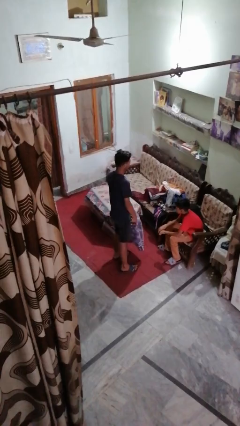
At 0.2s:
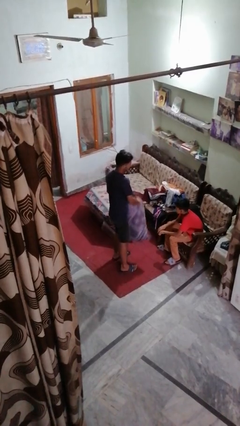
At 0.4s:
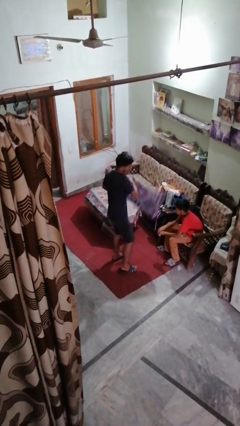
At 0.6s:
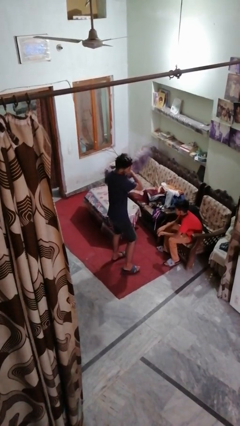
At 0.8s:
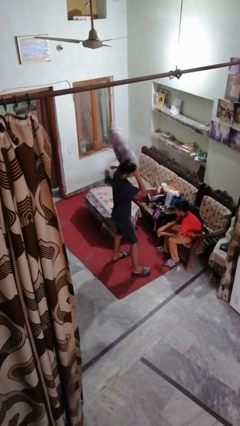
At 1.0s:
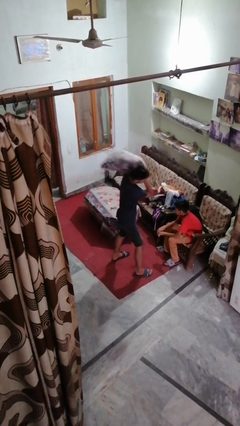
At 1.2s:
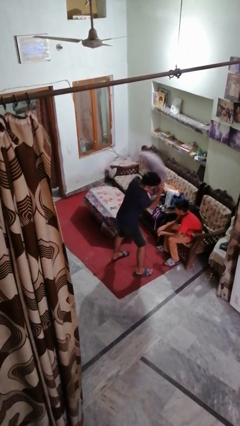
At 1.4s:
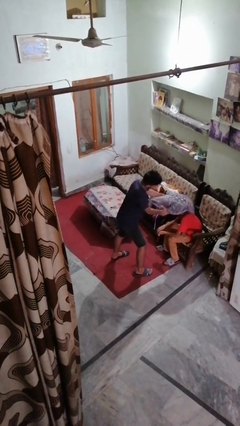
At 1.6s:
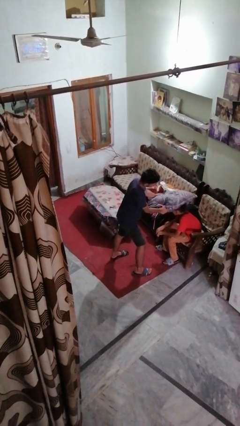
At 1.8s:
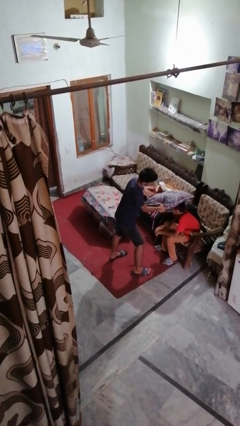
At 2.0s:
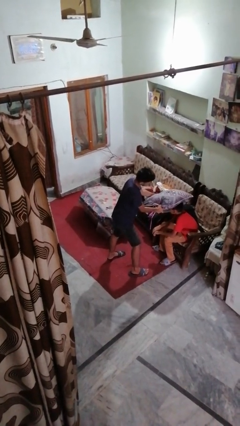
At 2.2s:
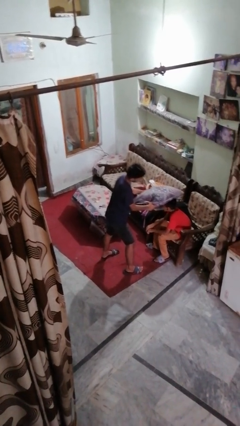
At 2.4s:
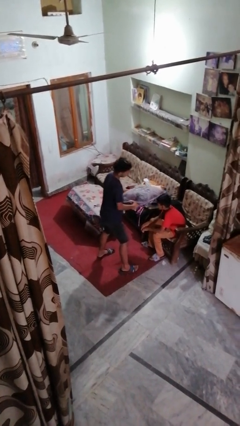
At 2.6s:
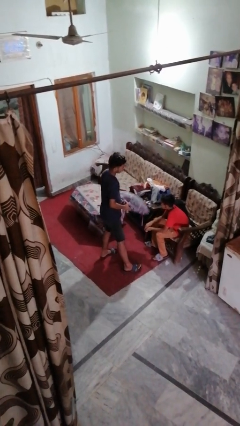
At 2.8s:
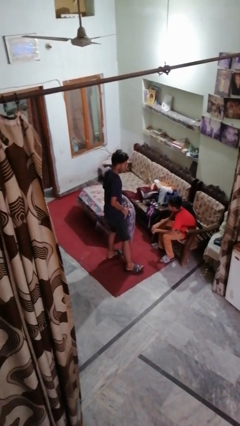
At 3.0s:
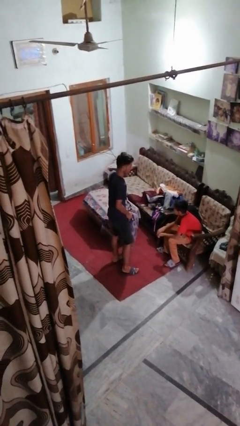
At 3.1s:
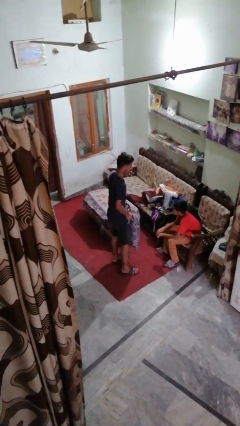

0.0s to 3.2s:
person hits person with pillow

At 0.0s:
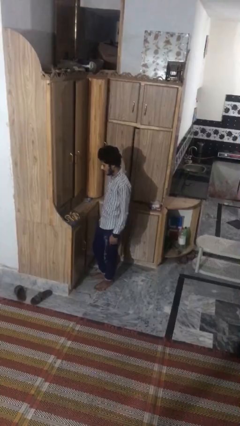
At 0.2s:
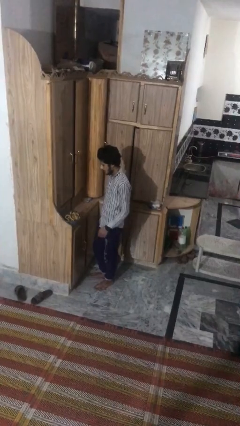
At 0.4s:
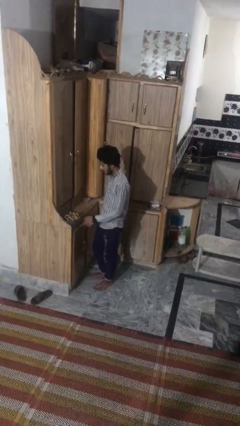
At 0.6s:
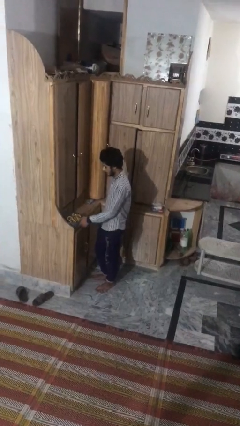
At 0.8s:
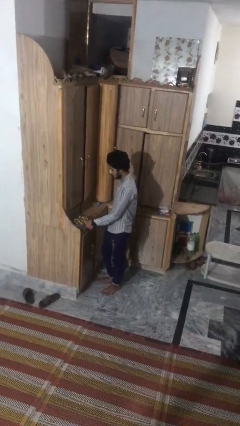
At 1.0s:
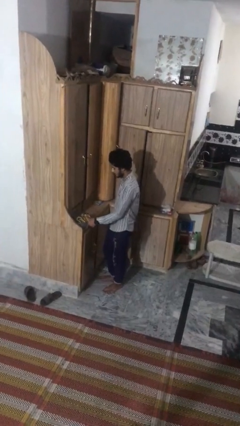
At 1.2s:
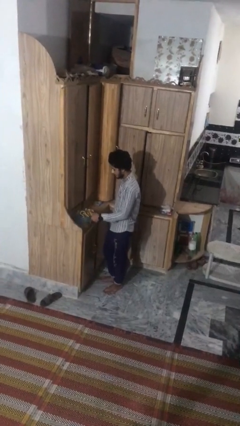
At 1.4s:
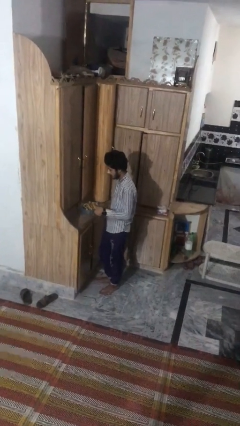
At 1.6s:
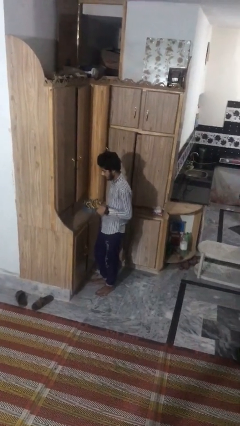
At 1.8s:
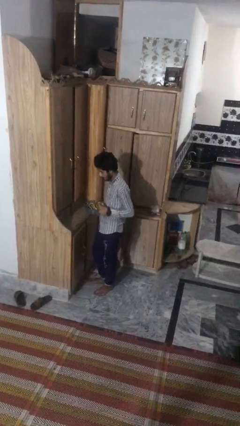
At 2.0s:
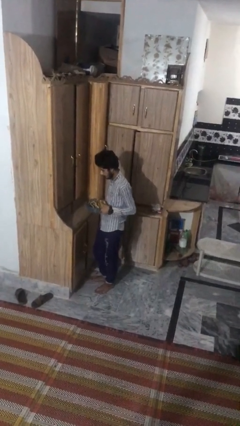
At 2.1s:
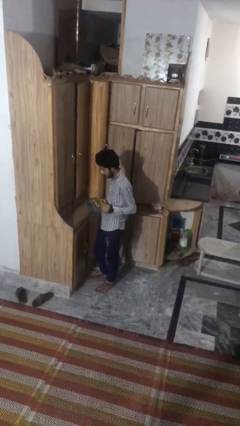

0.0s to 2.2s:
person picks up object from countertop

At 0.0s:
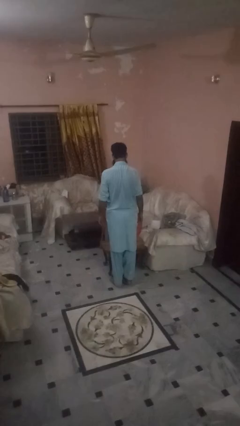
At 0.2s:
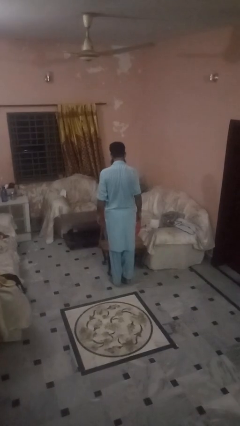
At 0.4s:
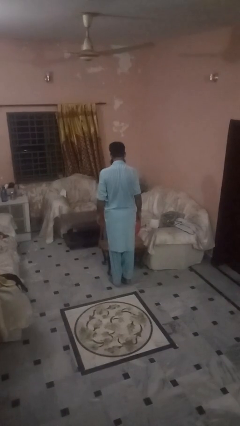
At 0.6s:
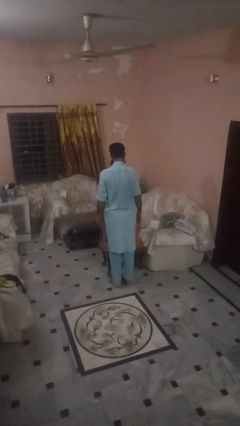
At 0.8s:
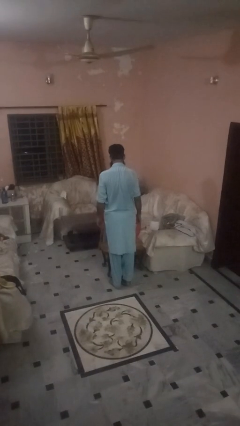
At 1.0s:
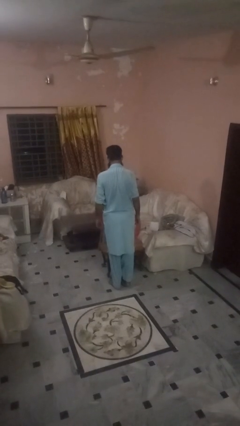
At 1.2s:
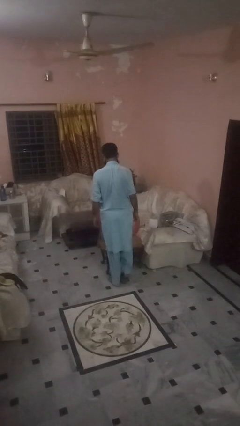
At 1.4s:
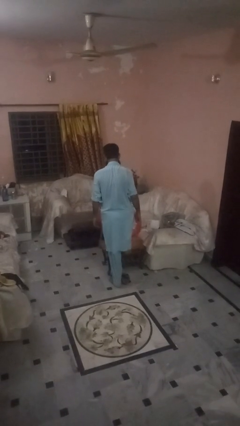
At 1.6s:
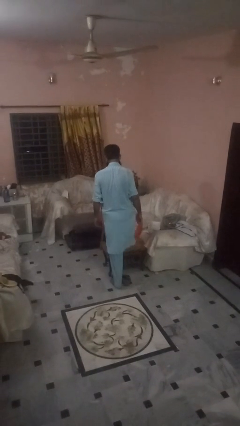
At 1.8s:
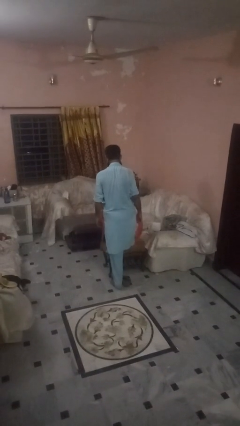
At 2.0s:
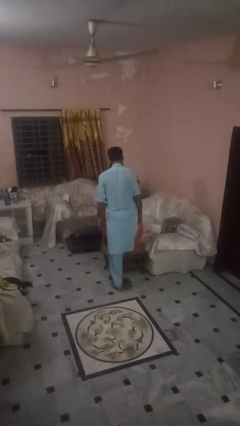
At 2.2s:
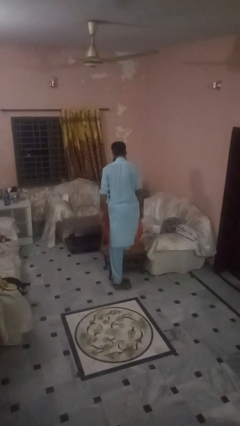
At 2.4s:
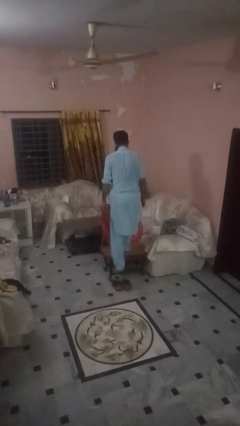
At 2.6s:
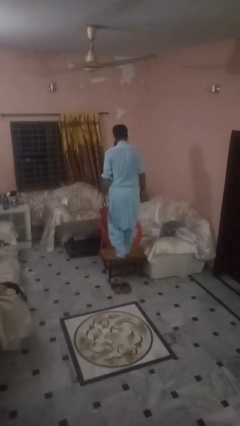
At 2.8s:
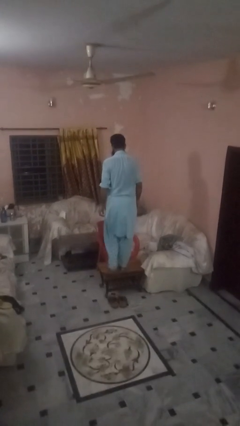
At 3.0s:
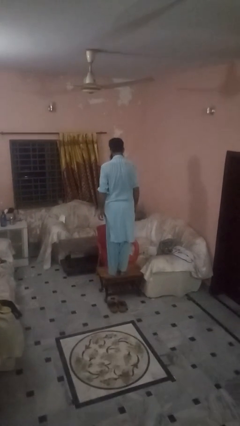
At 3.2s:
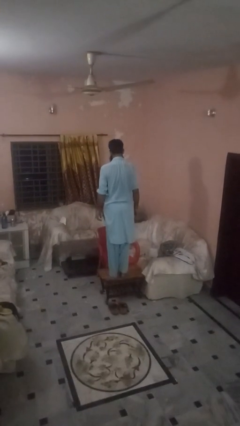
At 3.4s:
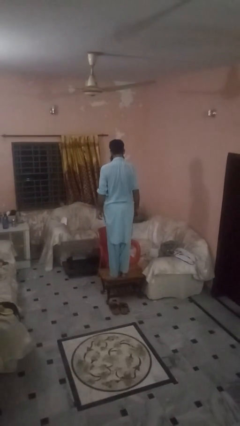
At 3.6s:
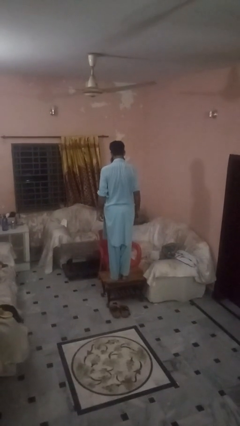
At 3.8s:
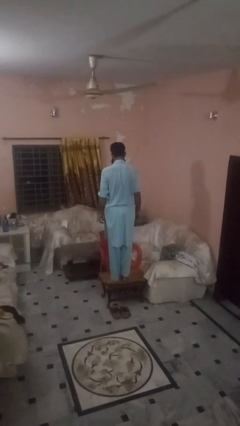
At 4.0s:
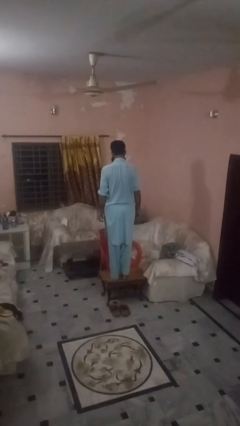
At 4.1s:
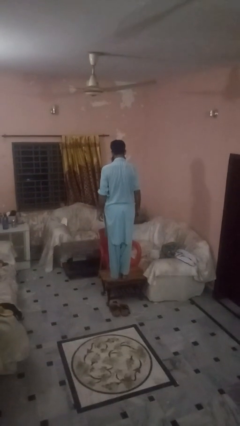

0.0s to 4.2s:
person climbs on table

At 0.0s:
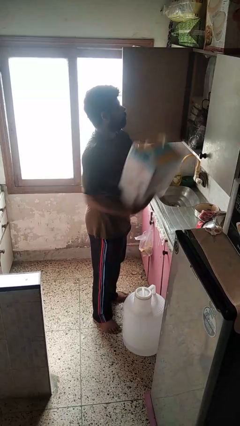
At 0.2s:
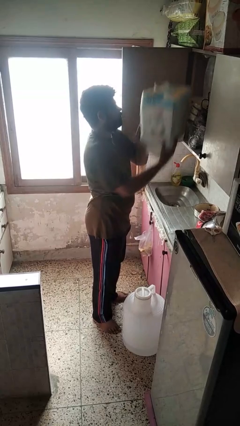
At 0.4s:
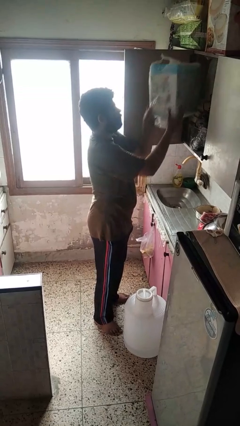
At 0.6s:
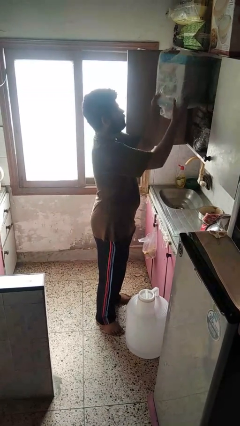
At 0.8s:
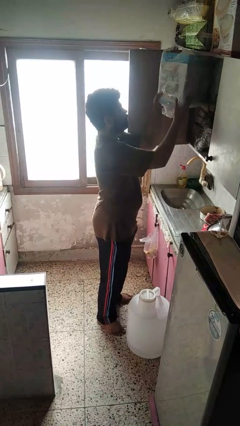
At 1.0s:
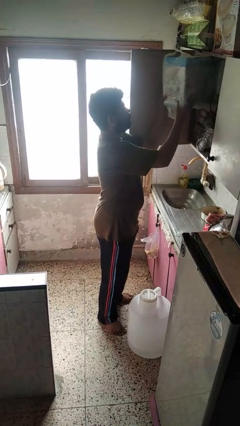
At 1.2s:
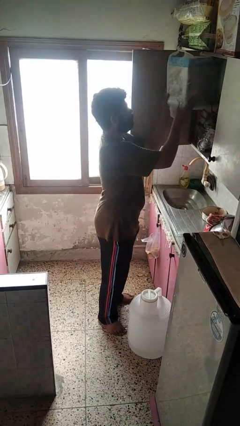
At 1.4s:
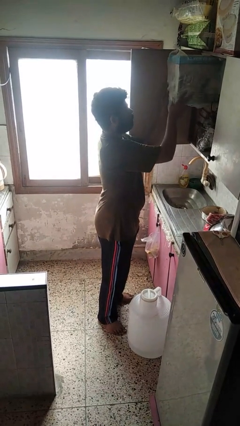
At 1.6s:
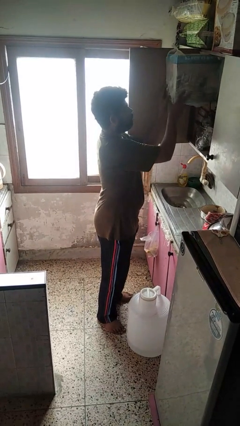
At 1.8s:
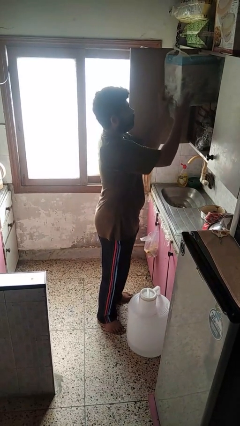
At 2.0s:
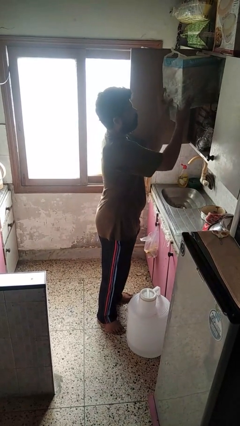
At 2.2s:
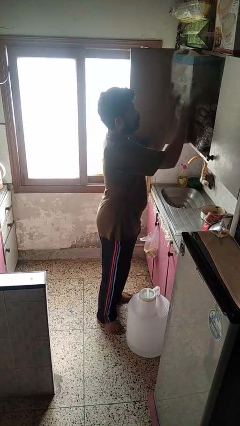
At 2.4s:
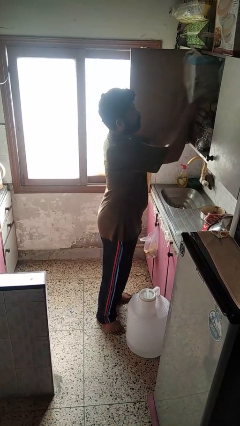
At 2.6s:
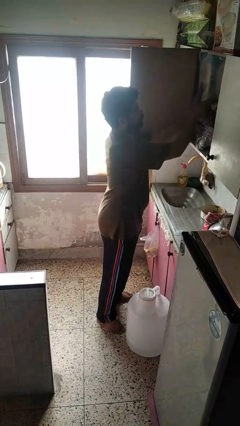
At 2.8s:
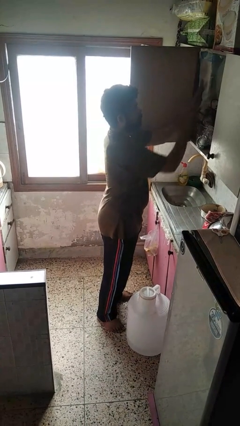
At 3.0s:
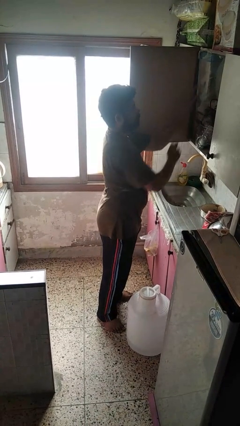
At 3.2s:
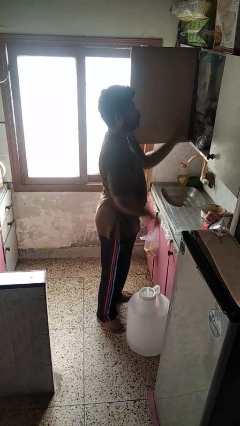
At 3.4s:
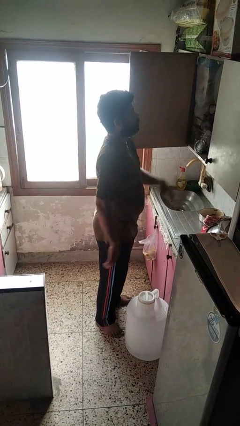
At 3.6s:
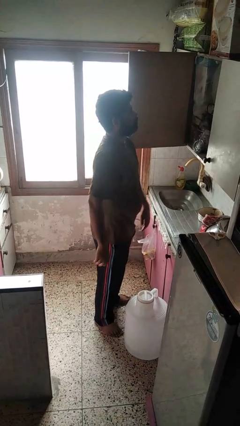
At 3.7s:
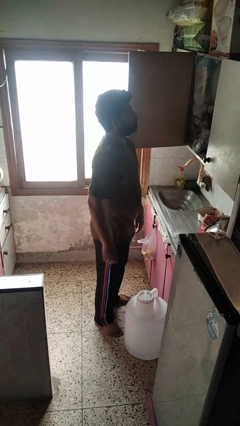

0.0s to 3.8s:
person puts down object into cabinet

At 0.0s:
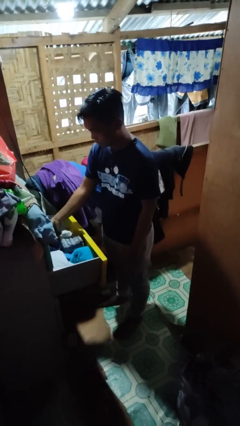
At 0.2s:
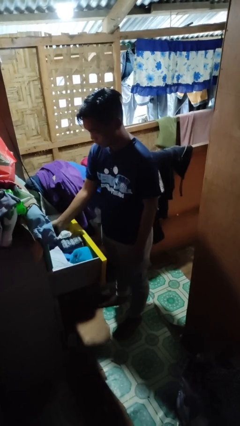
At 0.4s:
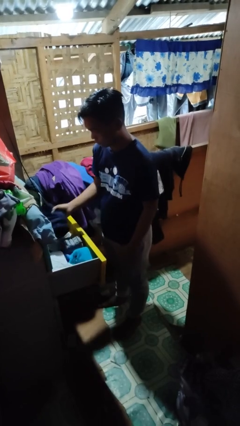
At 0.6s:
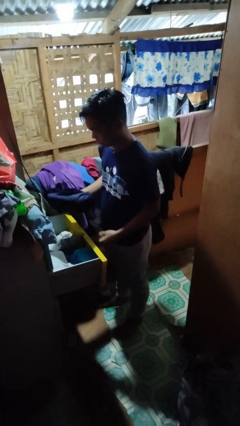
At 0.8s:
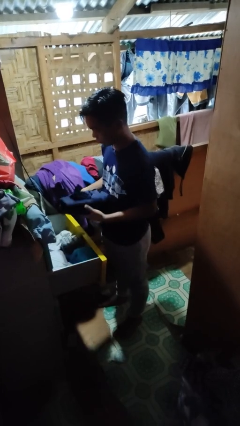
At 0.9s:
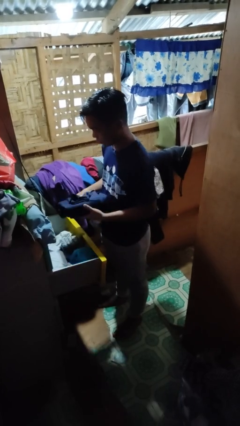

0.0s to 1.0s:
person takes clothes from dresser

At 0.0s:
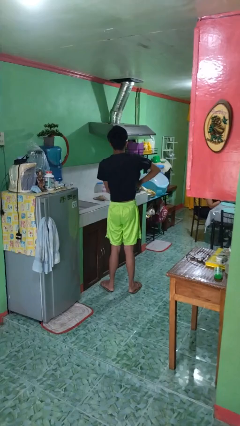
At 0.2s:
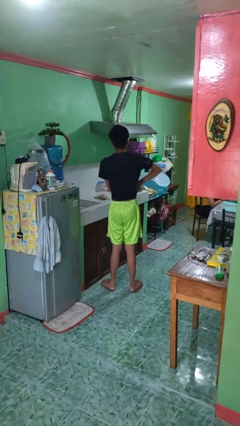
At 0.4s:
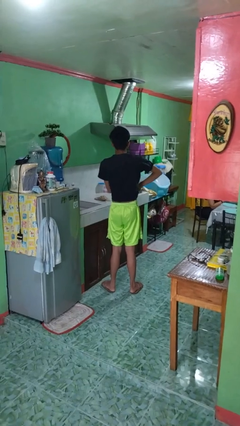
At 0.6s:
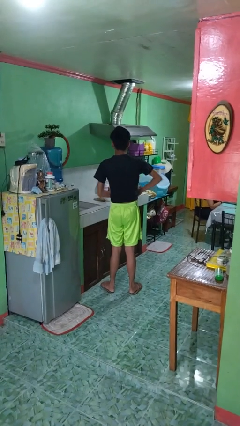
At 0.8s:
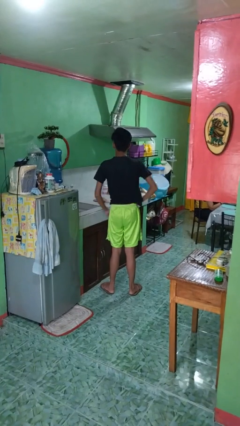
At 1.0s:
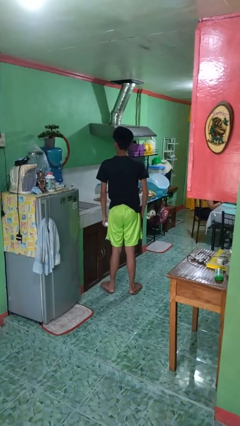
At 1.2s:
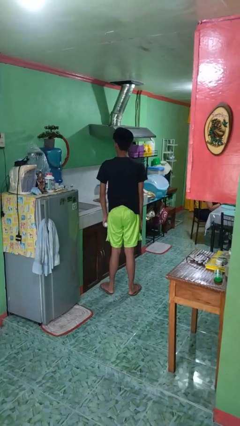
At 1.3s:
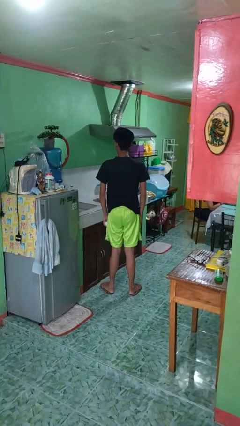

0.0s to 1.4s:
person applies deodorant

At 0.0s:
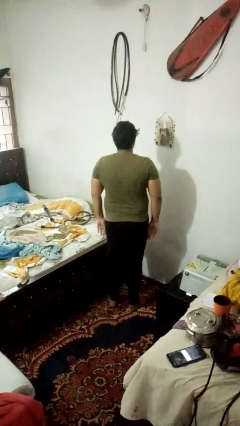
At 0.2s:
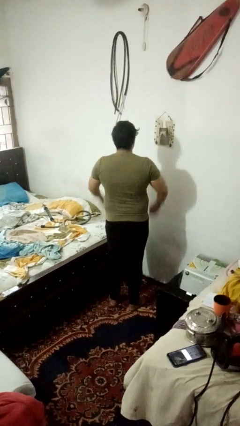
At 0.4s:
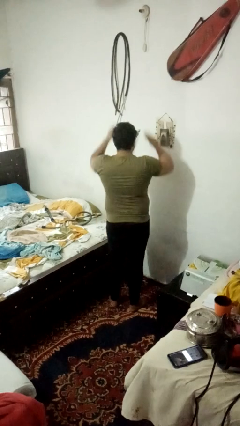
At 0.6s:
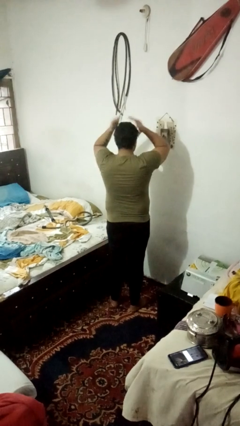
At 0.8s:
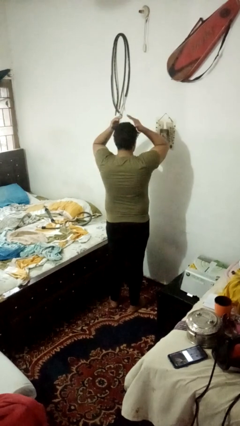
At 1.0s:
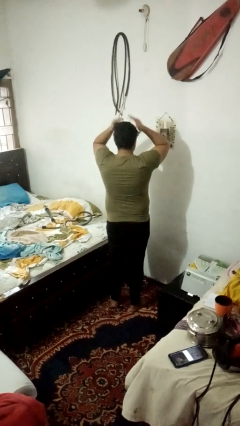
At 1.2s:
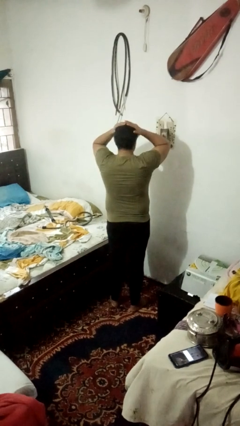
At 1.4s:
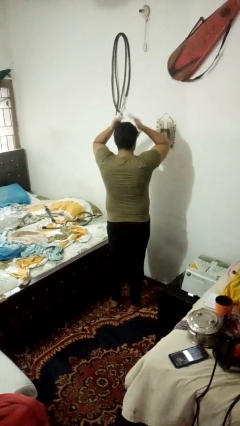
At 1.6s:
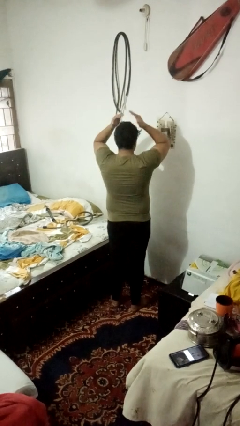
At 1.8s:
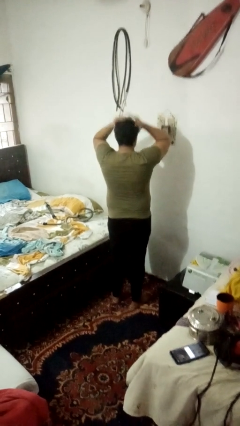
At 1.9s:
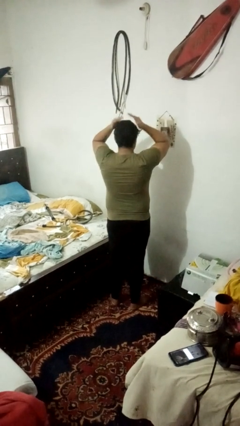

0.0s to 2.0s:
person pats head
